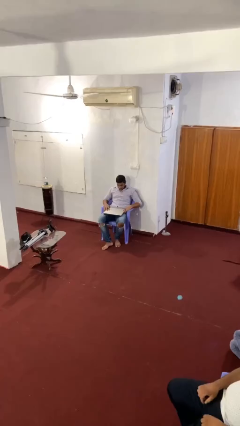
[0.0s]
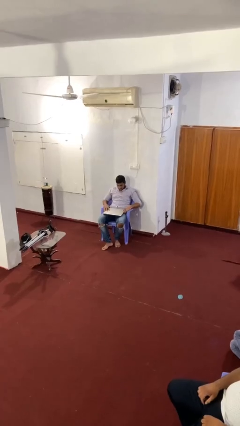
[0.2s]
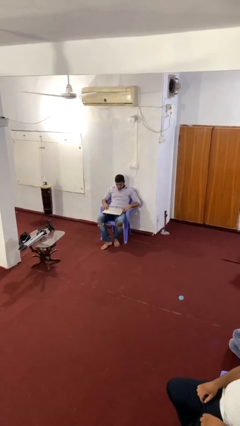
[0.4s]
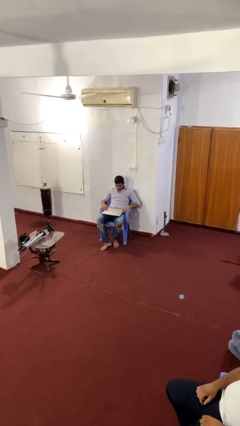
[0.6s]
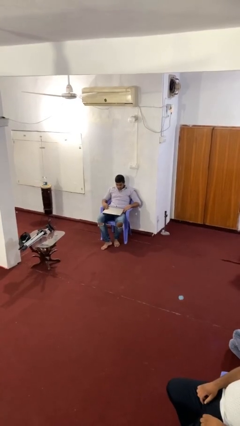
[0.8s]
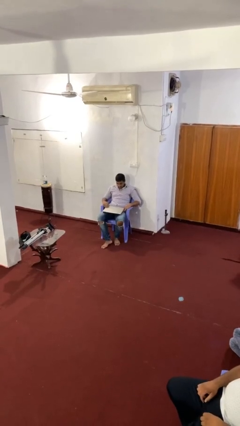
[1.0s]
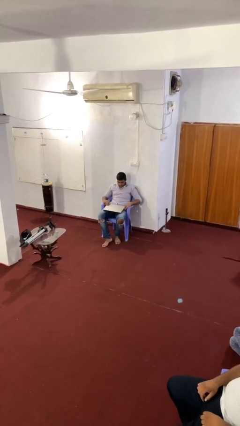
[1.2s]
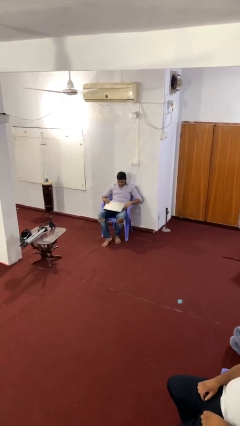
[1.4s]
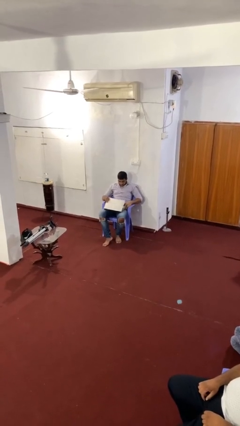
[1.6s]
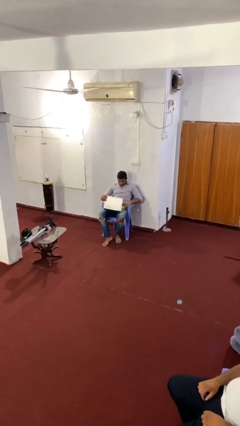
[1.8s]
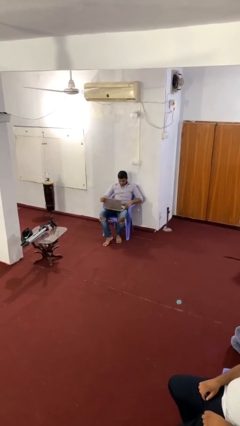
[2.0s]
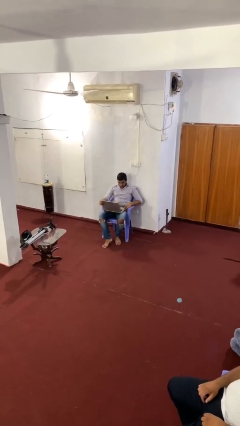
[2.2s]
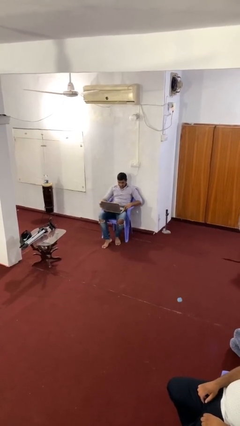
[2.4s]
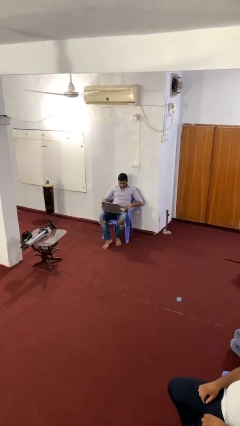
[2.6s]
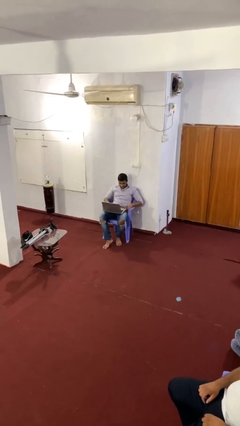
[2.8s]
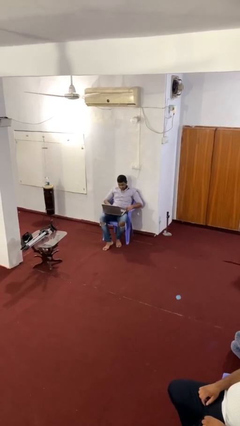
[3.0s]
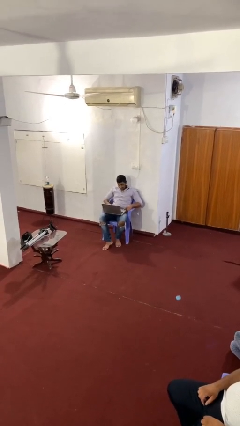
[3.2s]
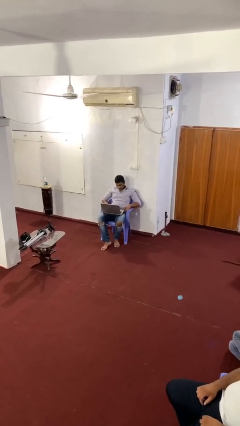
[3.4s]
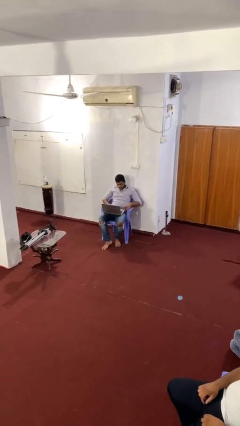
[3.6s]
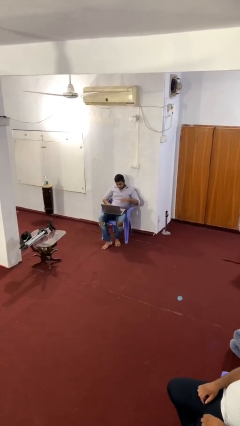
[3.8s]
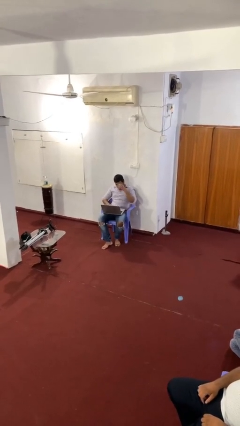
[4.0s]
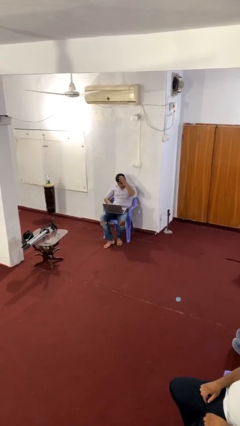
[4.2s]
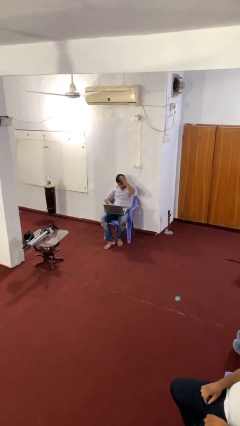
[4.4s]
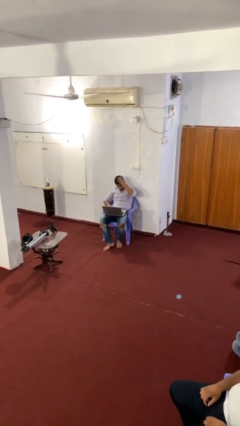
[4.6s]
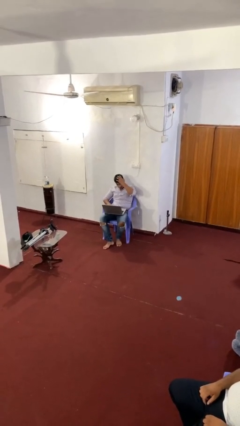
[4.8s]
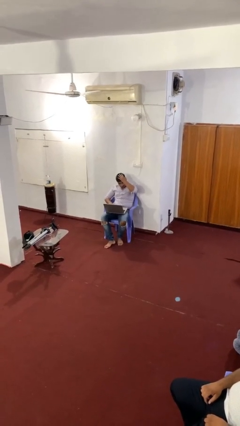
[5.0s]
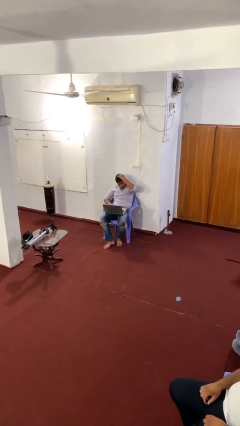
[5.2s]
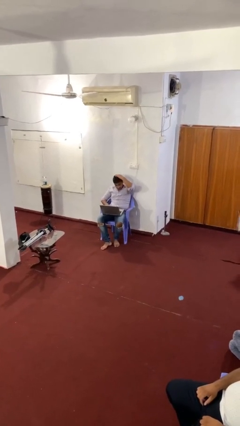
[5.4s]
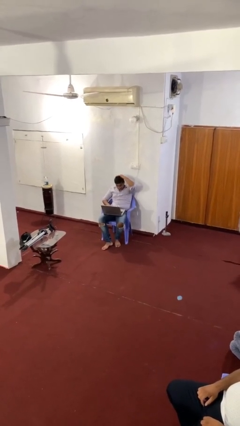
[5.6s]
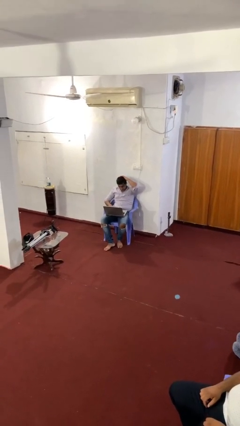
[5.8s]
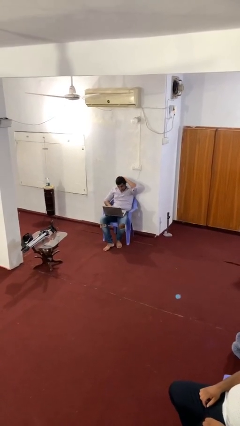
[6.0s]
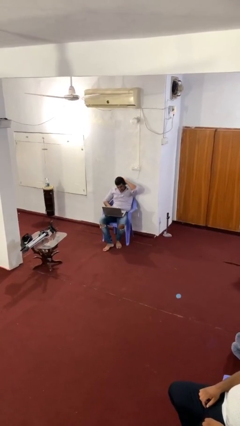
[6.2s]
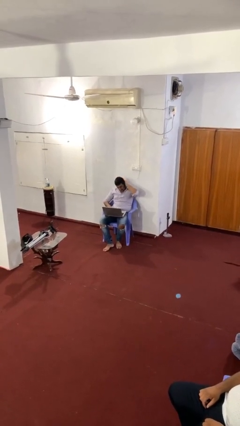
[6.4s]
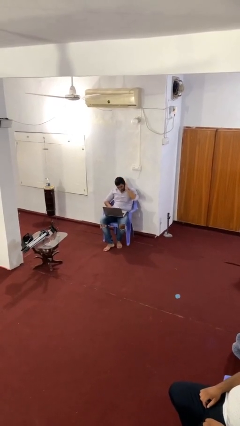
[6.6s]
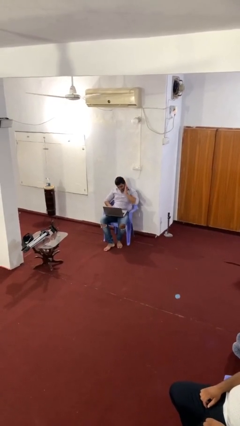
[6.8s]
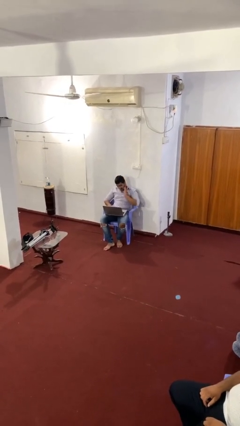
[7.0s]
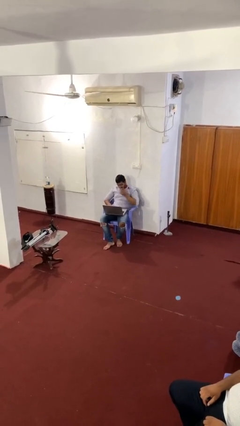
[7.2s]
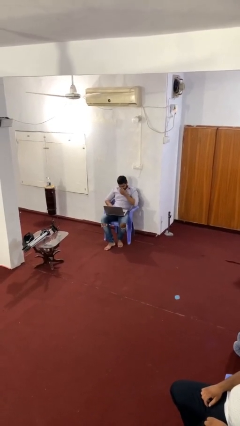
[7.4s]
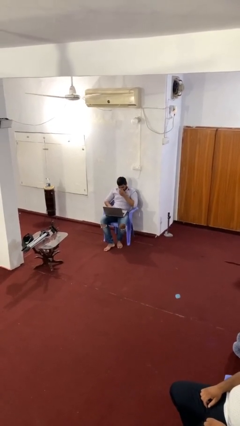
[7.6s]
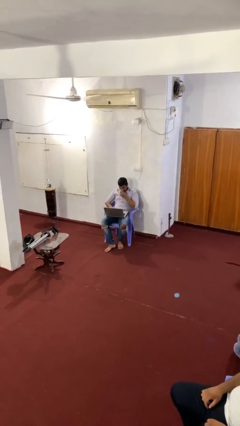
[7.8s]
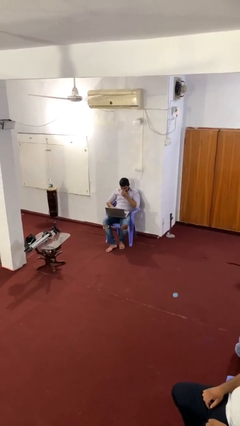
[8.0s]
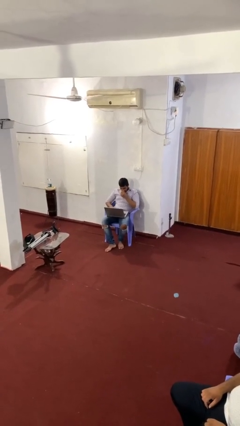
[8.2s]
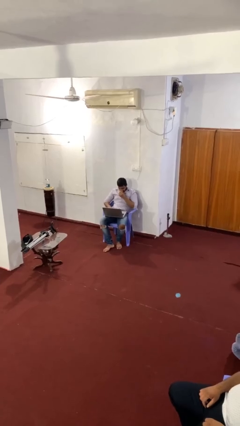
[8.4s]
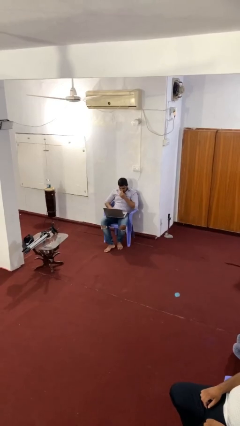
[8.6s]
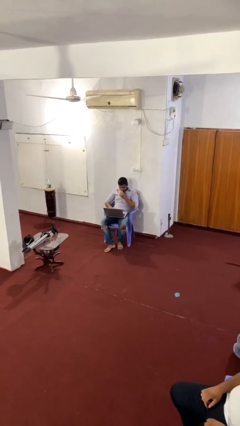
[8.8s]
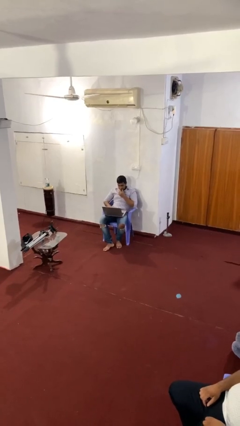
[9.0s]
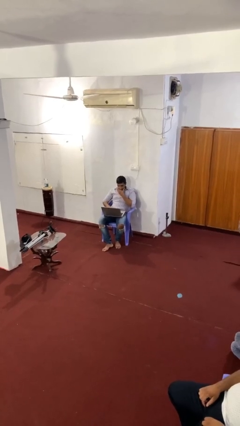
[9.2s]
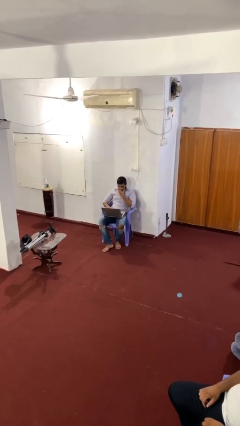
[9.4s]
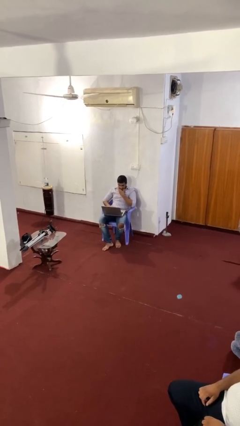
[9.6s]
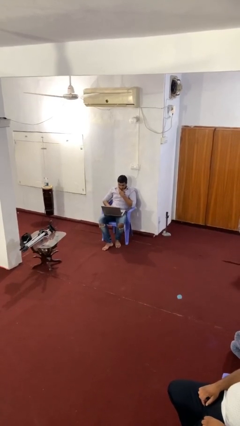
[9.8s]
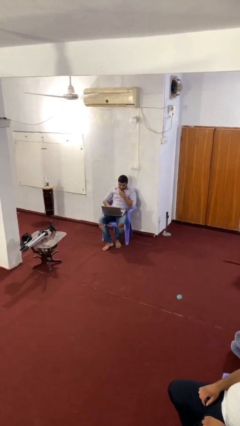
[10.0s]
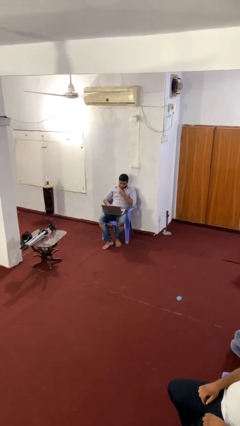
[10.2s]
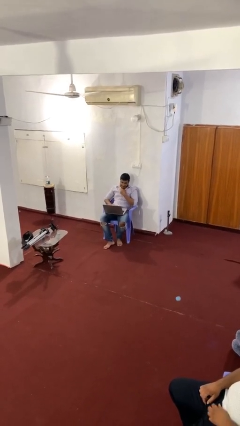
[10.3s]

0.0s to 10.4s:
person interacts with laptop

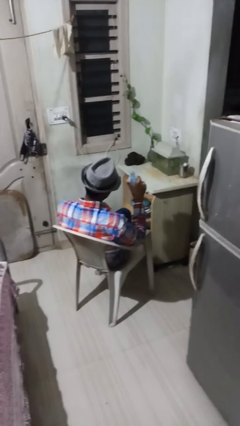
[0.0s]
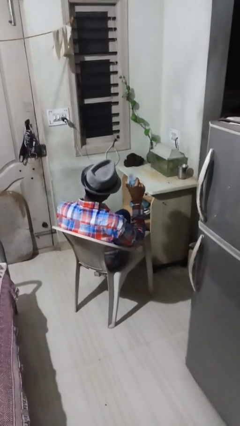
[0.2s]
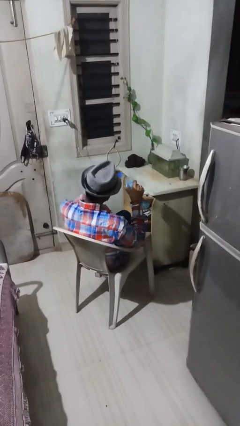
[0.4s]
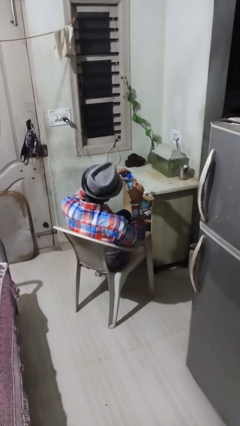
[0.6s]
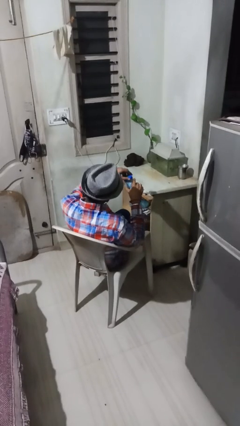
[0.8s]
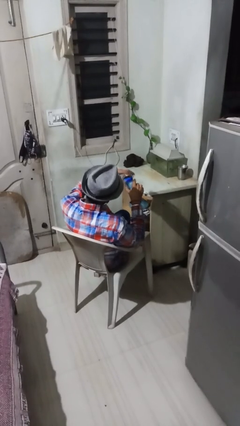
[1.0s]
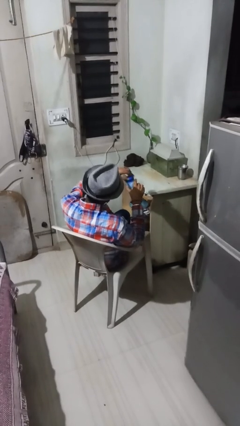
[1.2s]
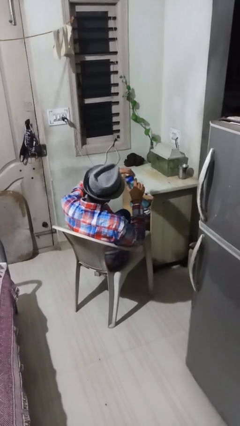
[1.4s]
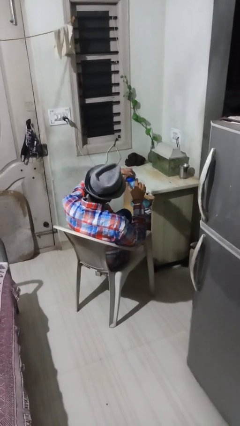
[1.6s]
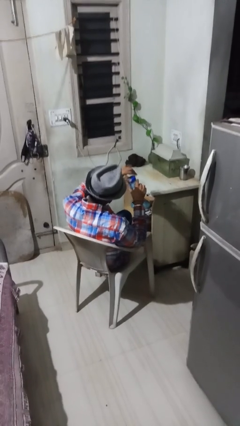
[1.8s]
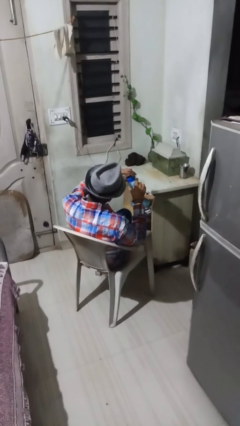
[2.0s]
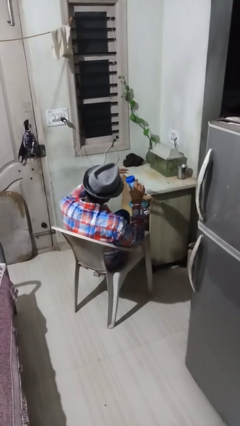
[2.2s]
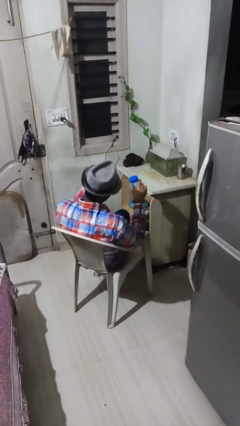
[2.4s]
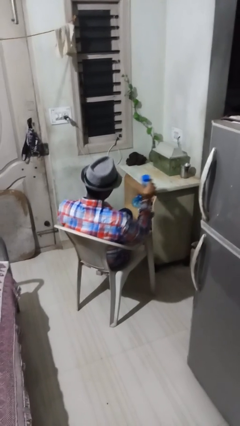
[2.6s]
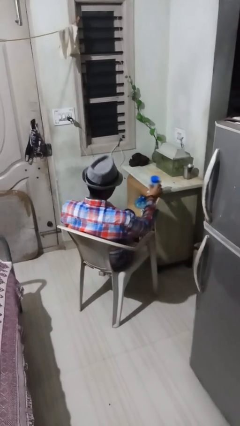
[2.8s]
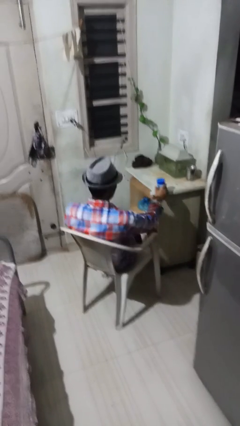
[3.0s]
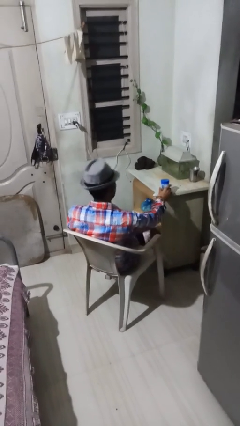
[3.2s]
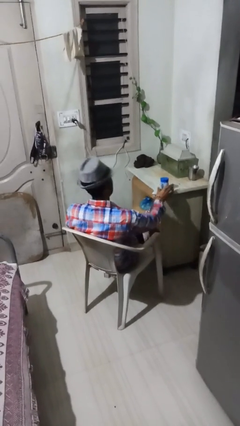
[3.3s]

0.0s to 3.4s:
person closes jar

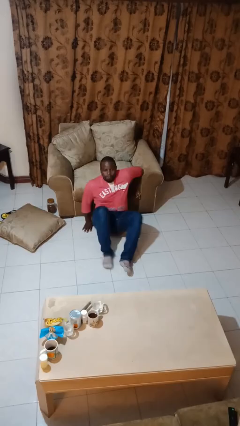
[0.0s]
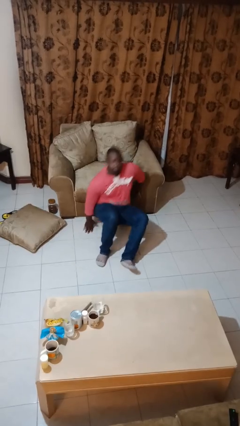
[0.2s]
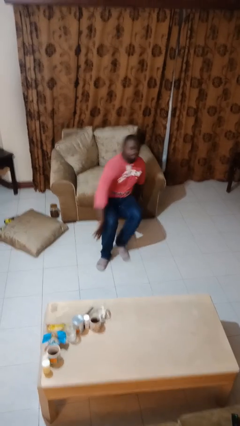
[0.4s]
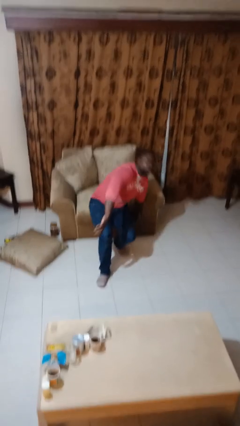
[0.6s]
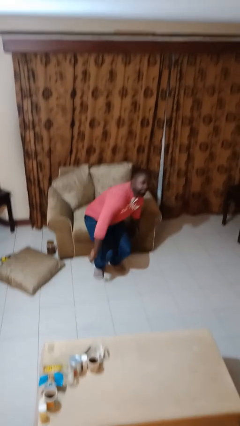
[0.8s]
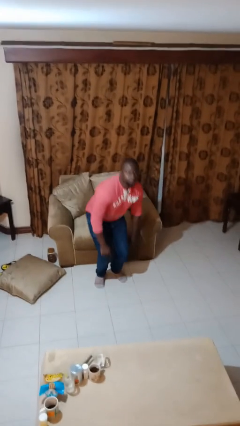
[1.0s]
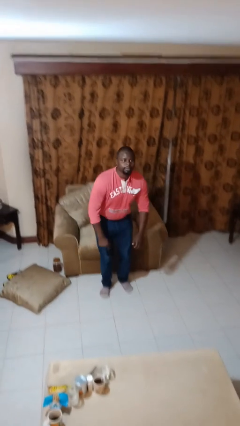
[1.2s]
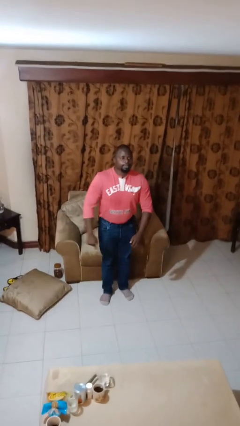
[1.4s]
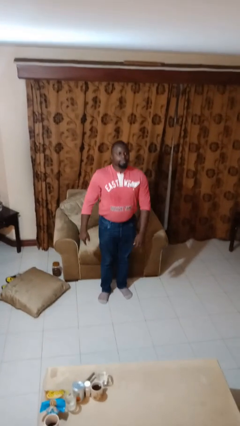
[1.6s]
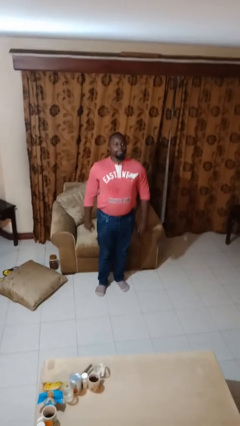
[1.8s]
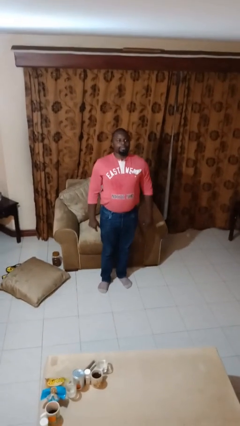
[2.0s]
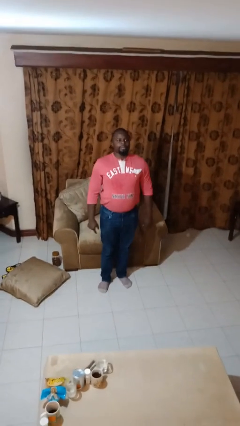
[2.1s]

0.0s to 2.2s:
person stands up from floor

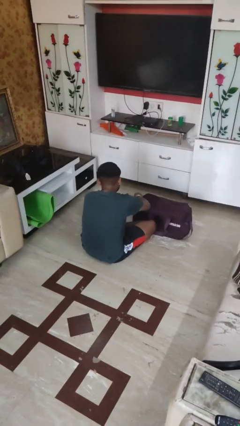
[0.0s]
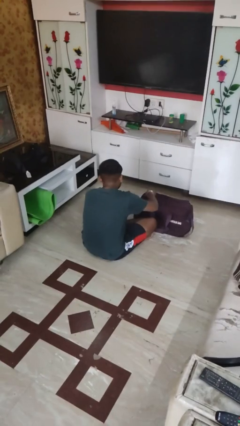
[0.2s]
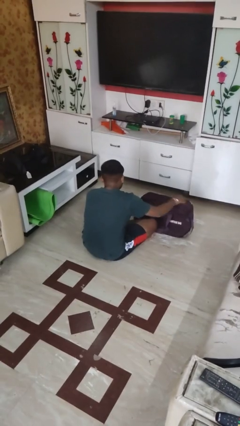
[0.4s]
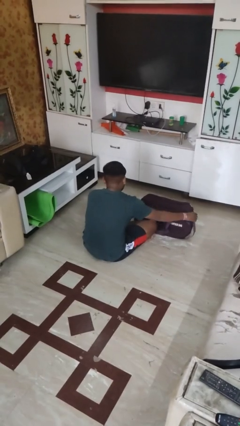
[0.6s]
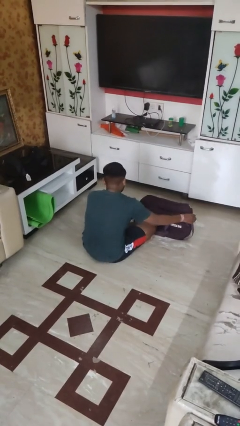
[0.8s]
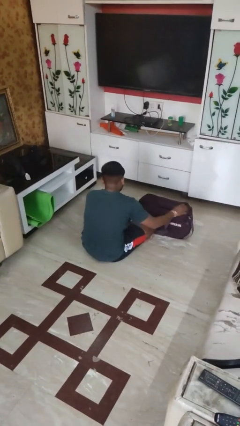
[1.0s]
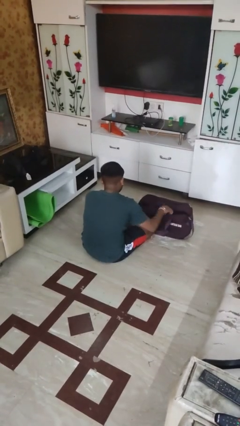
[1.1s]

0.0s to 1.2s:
person opens suitcase

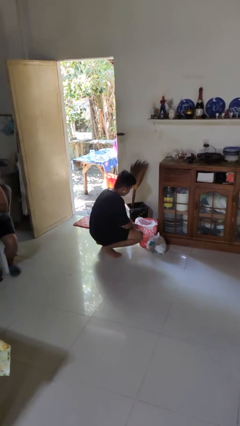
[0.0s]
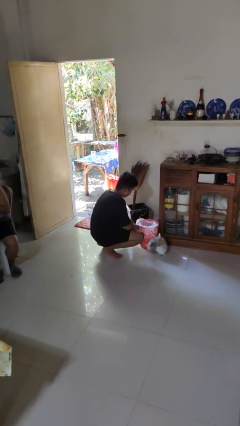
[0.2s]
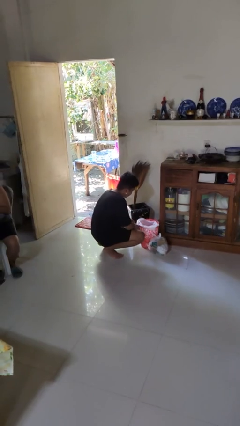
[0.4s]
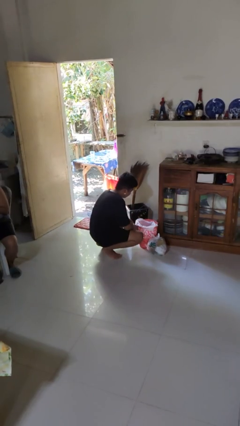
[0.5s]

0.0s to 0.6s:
person inserts trashbag into trashcan

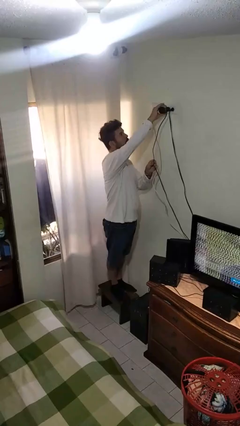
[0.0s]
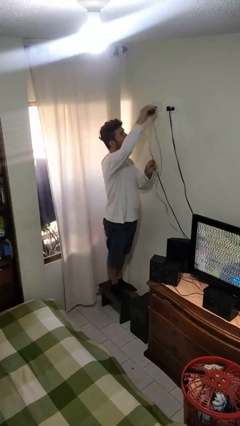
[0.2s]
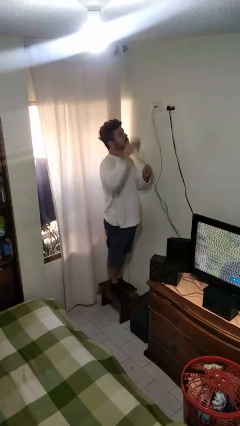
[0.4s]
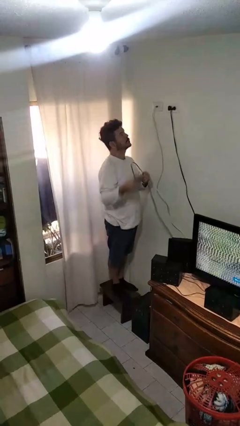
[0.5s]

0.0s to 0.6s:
person unplugs from electrical socket
